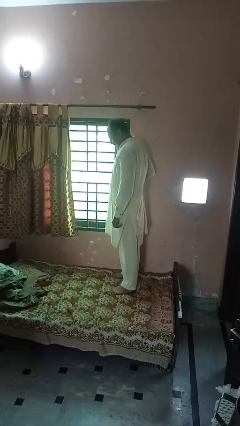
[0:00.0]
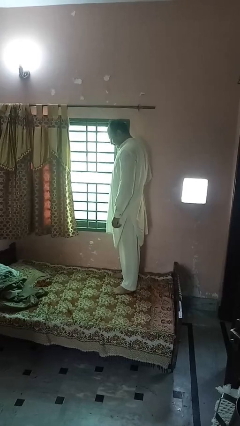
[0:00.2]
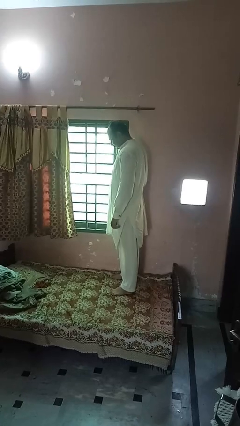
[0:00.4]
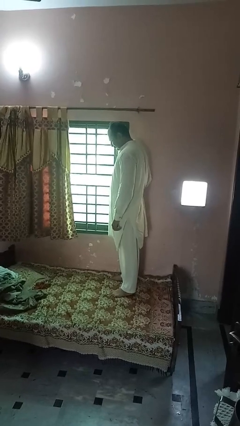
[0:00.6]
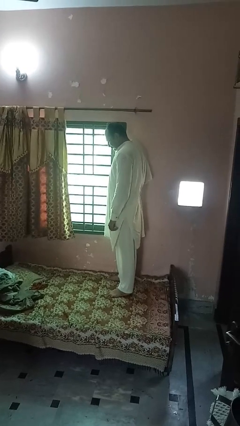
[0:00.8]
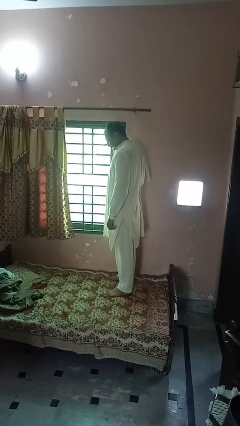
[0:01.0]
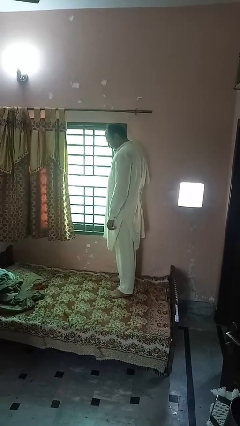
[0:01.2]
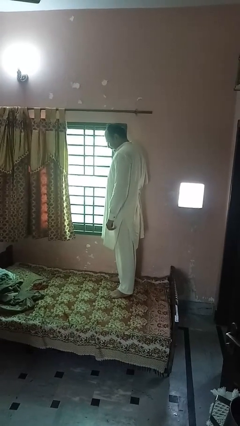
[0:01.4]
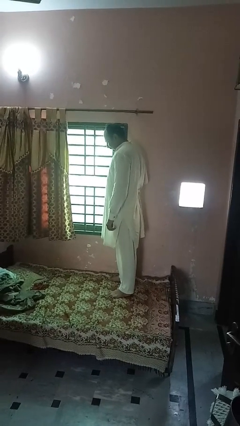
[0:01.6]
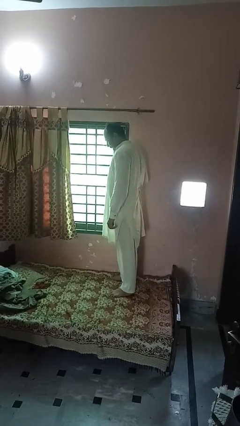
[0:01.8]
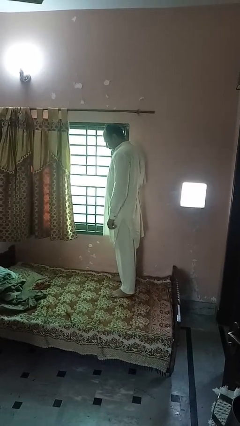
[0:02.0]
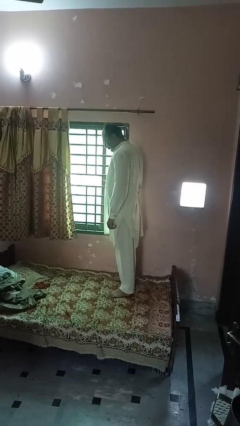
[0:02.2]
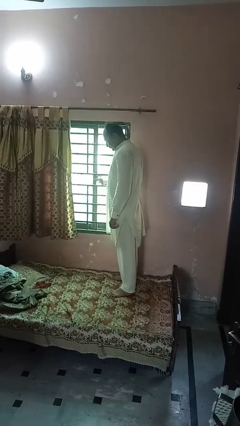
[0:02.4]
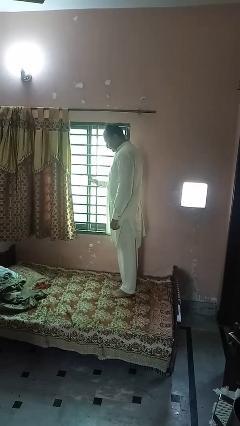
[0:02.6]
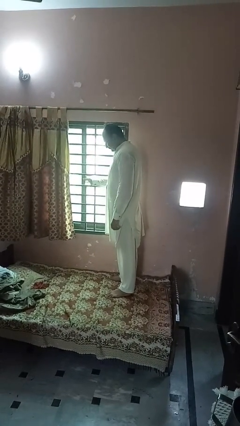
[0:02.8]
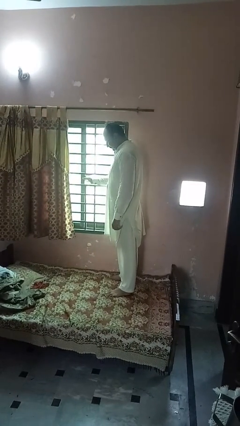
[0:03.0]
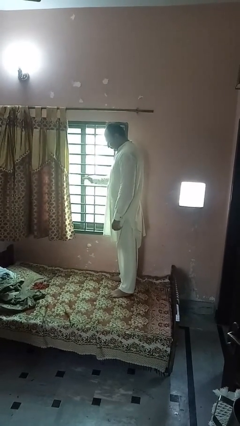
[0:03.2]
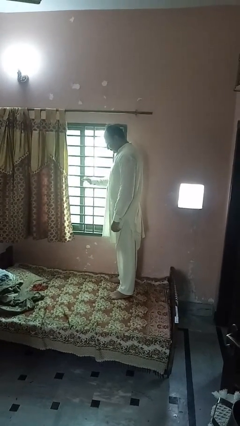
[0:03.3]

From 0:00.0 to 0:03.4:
person opens home window

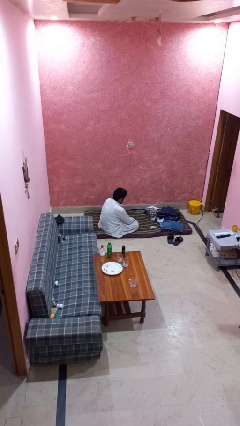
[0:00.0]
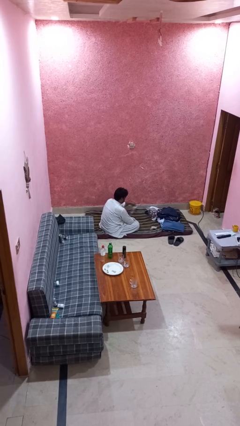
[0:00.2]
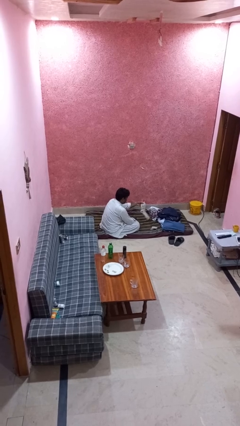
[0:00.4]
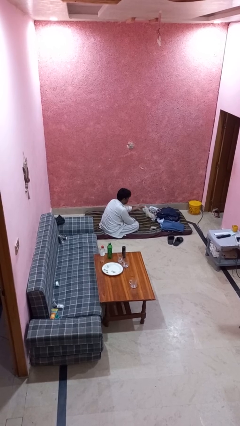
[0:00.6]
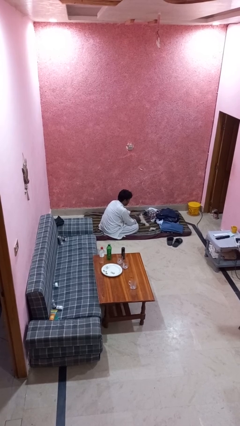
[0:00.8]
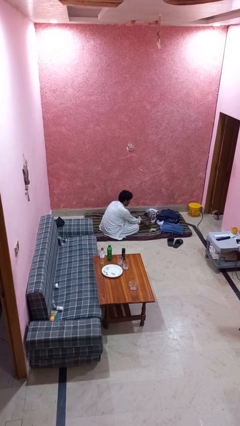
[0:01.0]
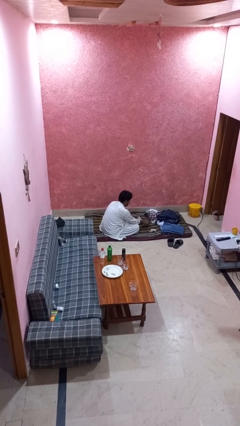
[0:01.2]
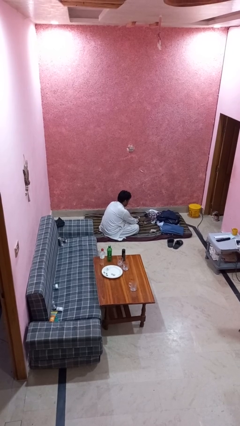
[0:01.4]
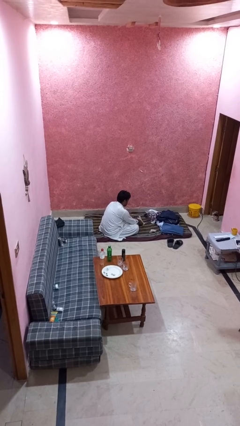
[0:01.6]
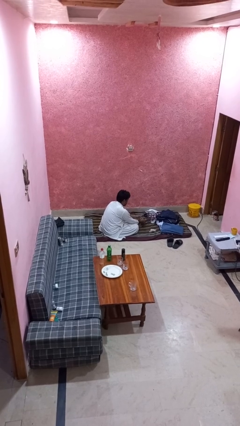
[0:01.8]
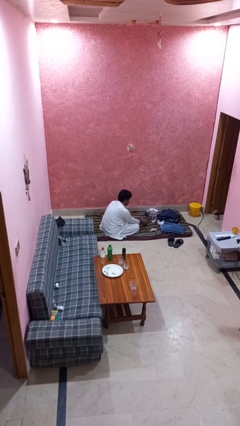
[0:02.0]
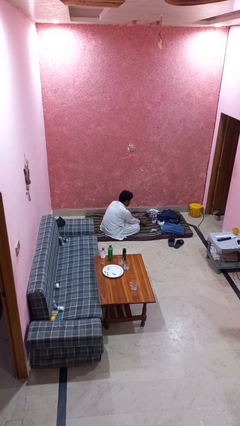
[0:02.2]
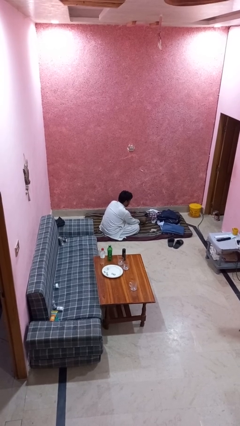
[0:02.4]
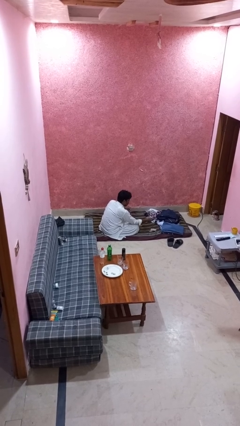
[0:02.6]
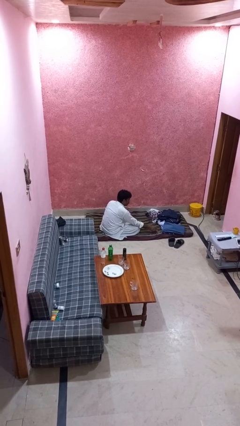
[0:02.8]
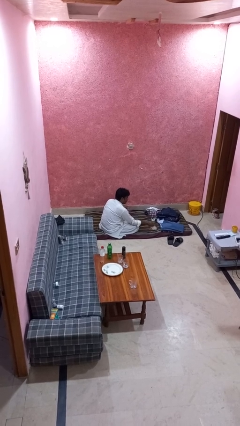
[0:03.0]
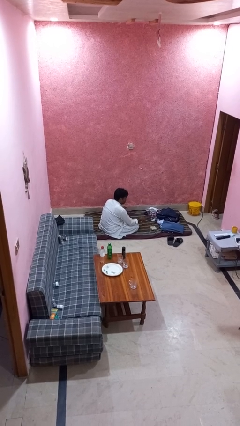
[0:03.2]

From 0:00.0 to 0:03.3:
person folds socks

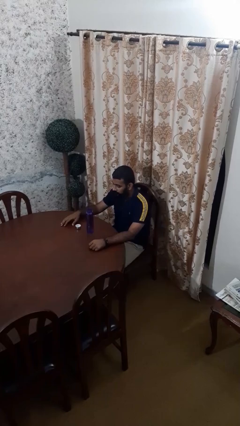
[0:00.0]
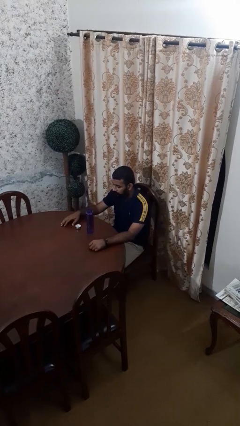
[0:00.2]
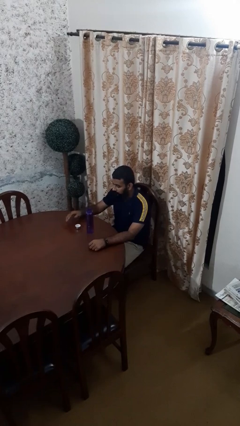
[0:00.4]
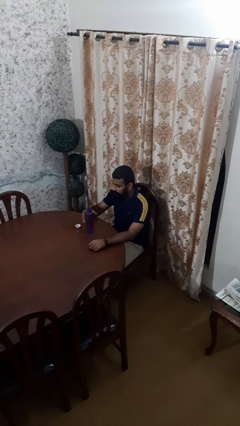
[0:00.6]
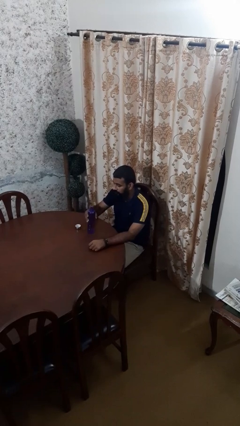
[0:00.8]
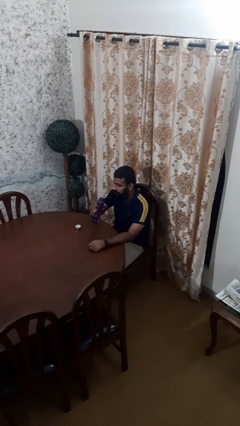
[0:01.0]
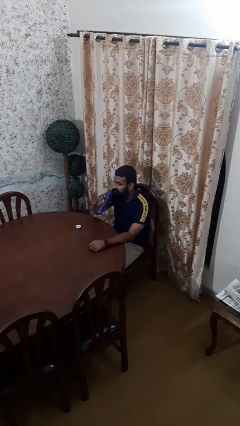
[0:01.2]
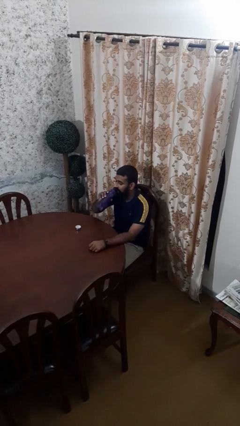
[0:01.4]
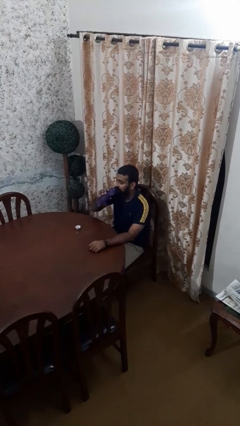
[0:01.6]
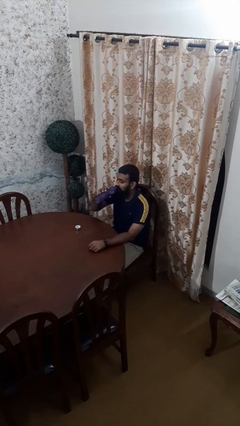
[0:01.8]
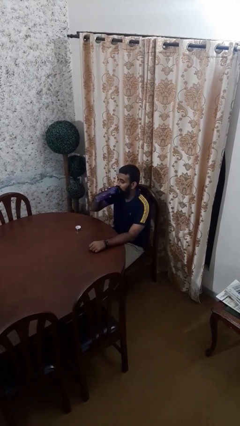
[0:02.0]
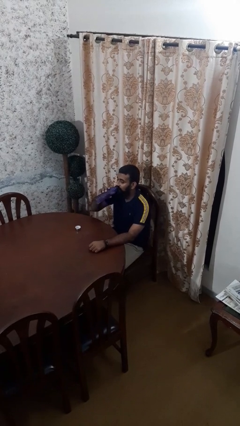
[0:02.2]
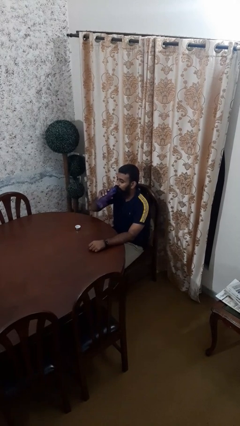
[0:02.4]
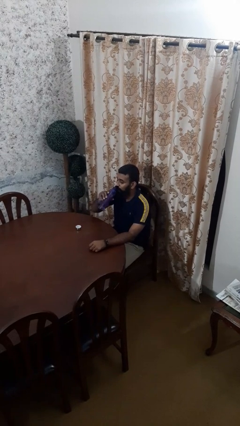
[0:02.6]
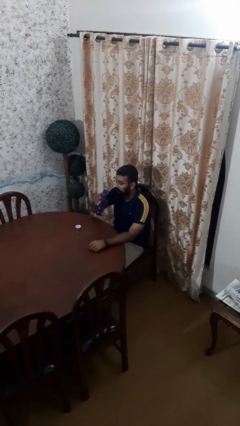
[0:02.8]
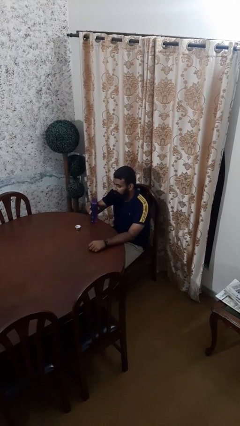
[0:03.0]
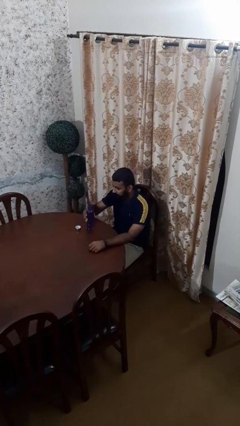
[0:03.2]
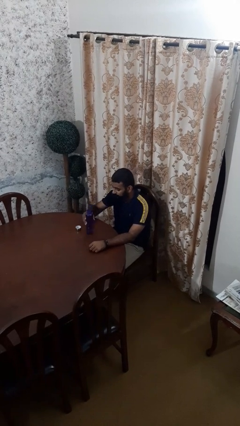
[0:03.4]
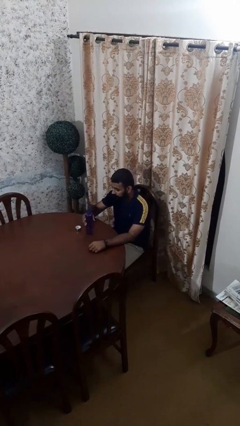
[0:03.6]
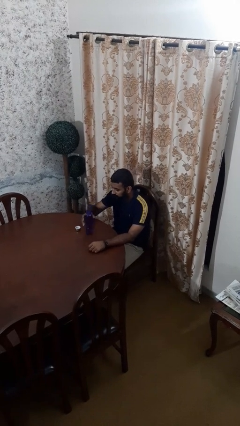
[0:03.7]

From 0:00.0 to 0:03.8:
person drinks from bottle

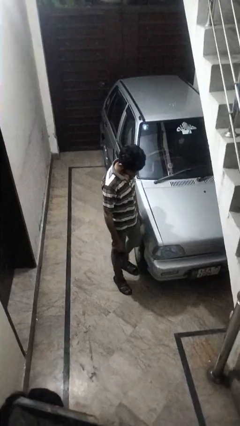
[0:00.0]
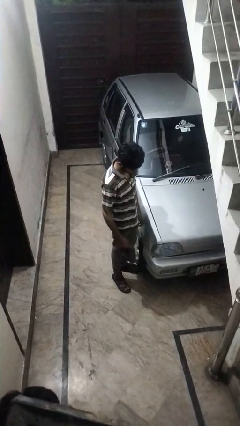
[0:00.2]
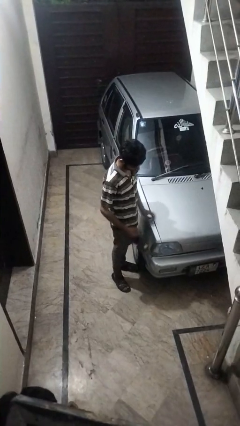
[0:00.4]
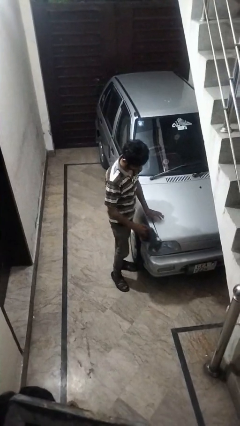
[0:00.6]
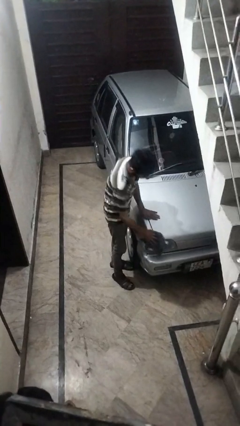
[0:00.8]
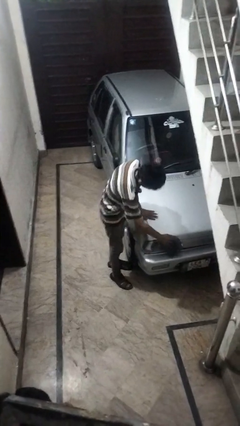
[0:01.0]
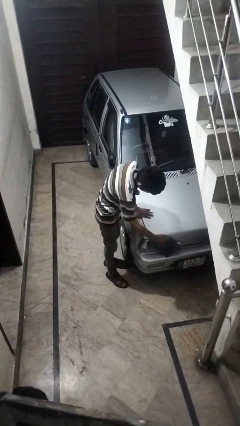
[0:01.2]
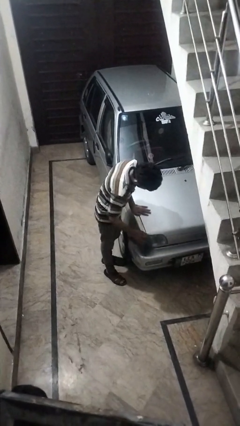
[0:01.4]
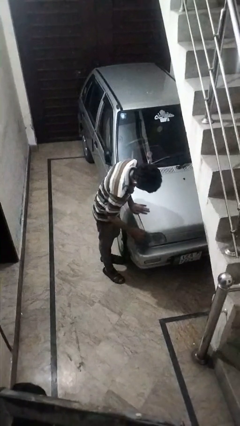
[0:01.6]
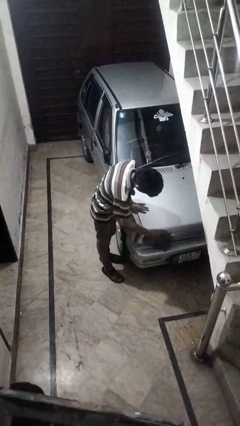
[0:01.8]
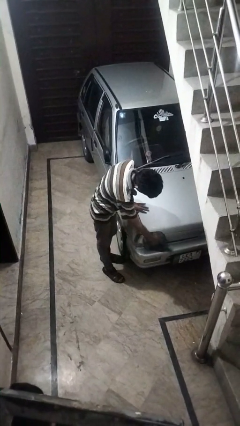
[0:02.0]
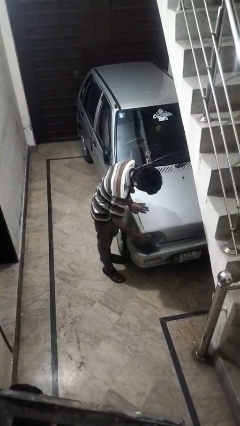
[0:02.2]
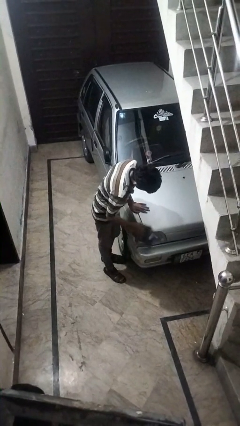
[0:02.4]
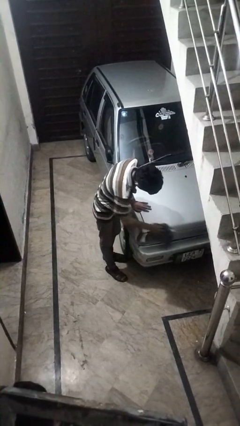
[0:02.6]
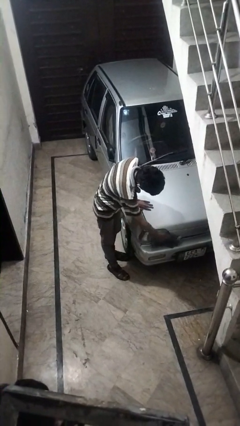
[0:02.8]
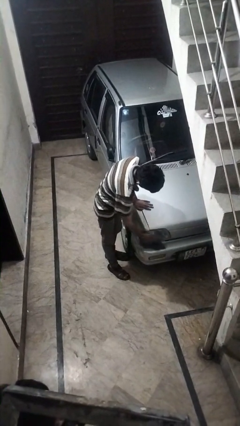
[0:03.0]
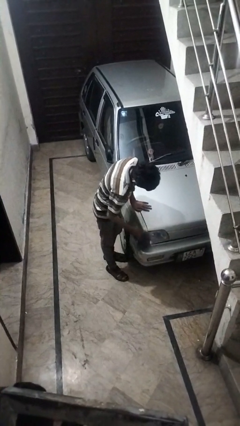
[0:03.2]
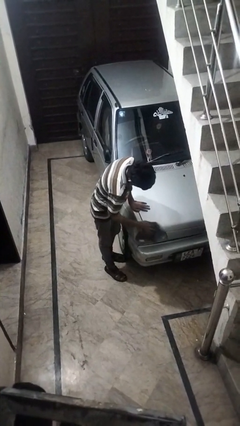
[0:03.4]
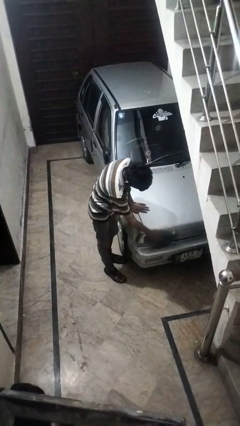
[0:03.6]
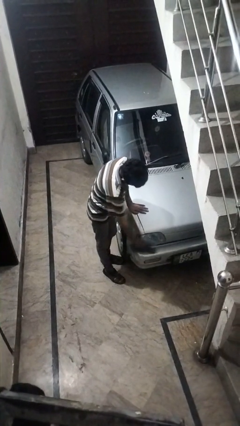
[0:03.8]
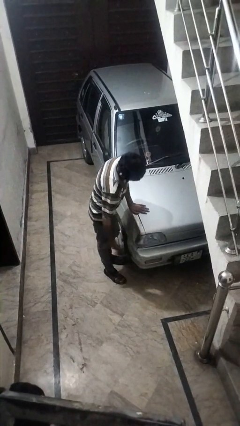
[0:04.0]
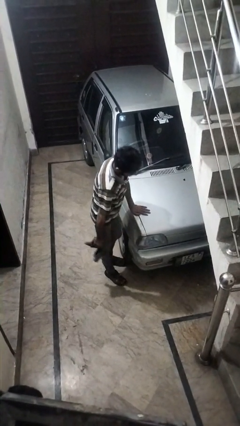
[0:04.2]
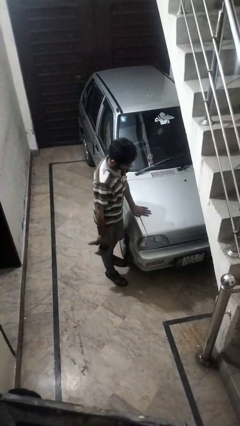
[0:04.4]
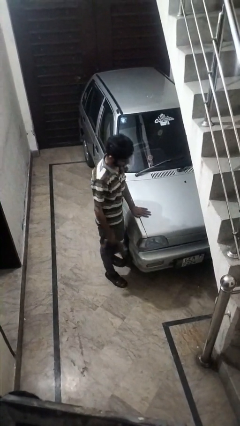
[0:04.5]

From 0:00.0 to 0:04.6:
person polishes car with rag

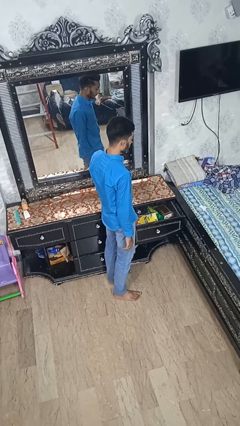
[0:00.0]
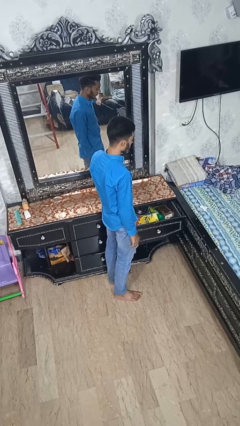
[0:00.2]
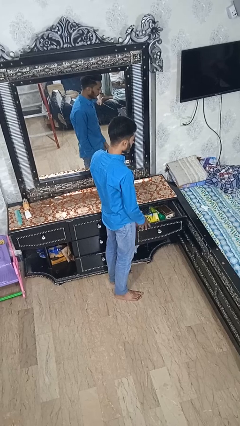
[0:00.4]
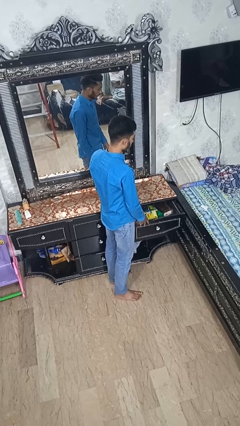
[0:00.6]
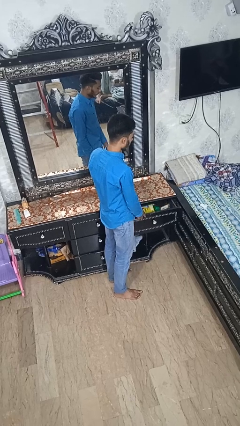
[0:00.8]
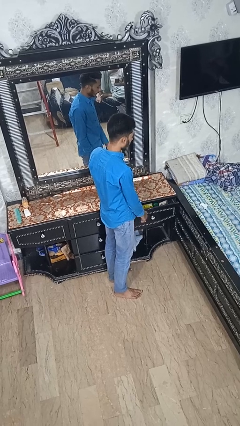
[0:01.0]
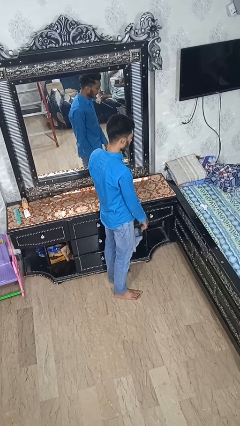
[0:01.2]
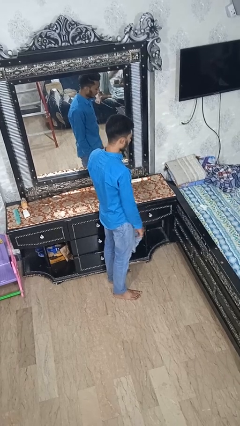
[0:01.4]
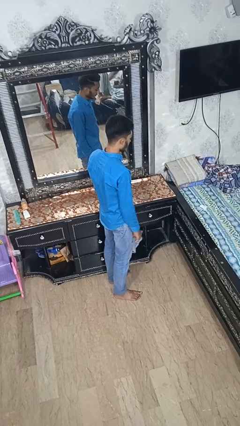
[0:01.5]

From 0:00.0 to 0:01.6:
person closes dresser drawer

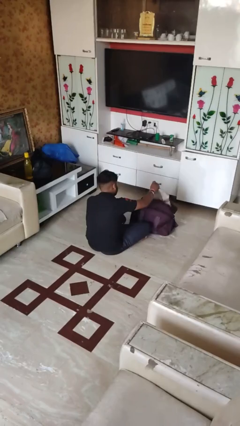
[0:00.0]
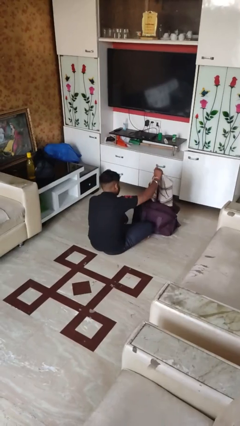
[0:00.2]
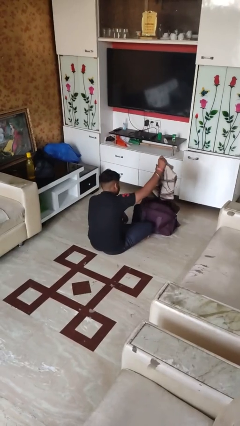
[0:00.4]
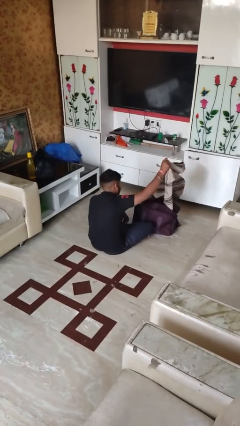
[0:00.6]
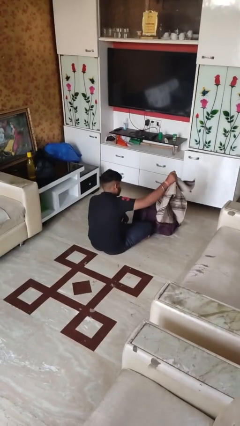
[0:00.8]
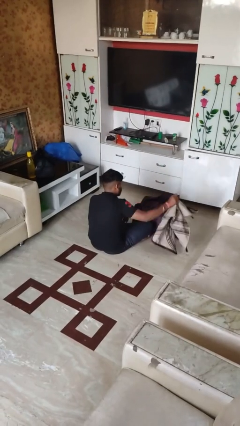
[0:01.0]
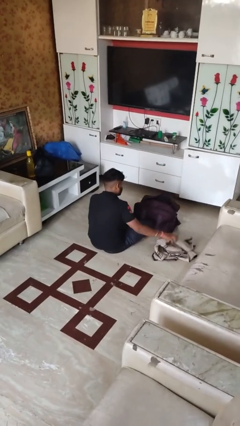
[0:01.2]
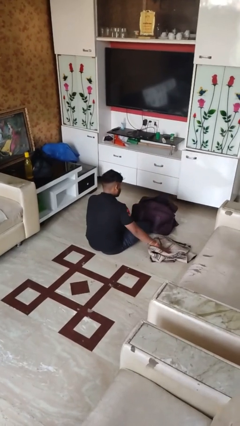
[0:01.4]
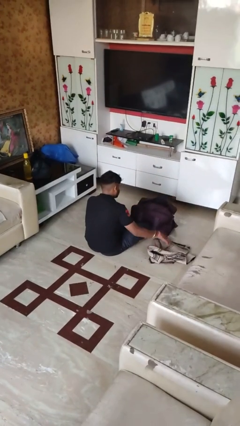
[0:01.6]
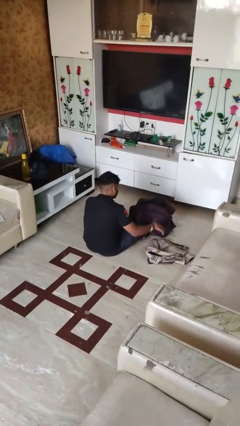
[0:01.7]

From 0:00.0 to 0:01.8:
person unloads clothes from suitcase
